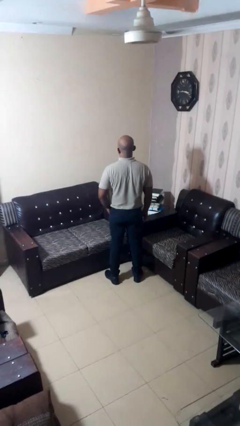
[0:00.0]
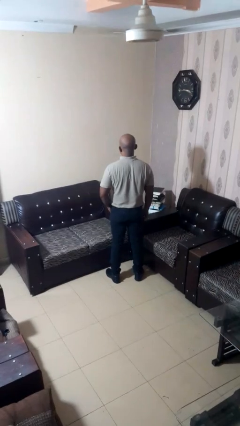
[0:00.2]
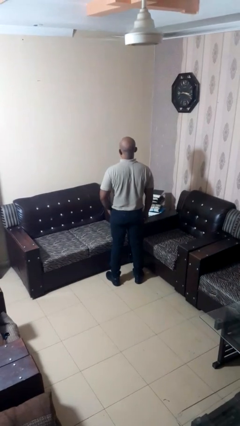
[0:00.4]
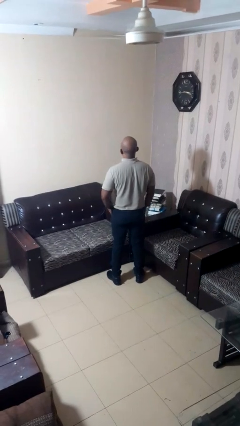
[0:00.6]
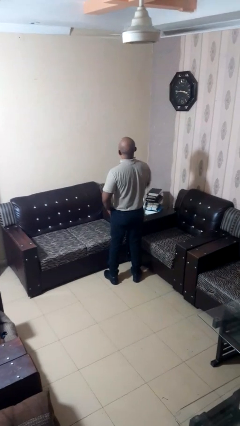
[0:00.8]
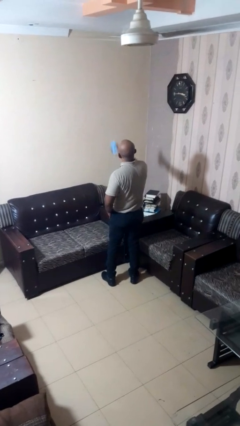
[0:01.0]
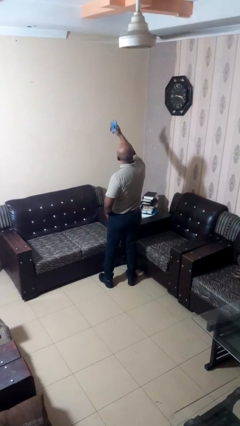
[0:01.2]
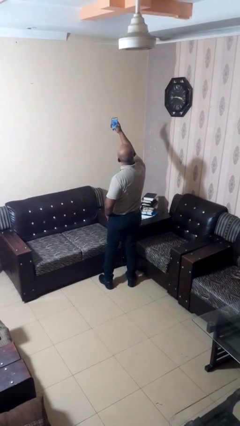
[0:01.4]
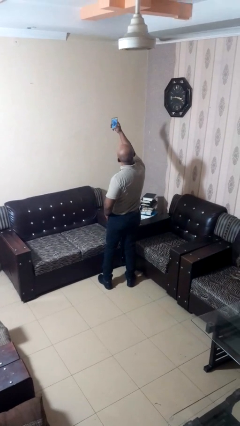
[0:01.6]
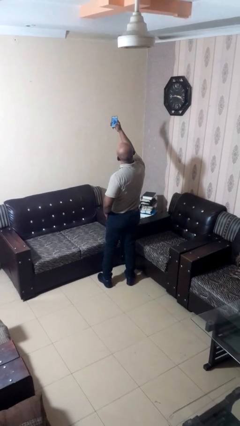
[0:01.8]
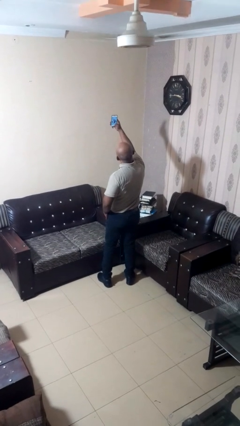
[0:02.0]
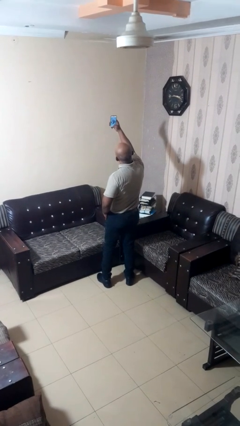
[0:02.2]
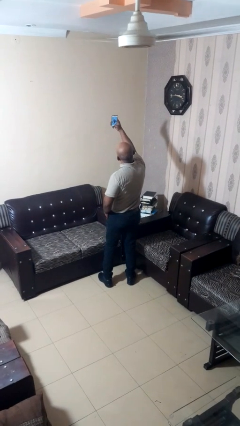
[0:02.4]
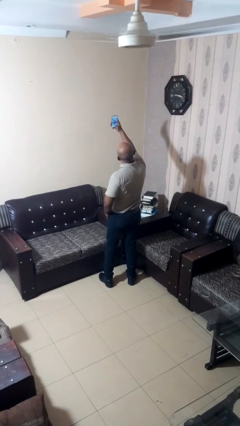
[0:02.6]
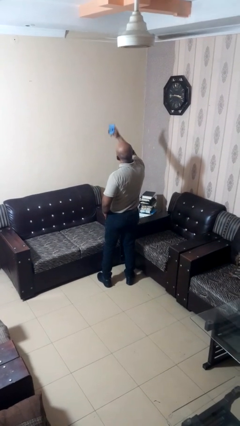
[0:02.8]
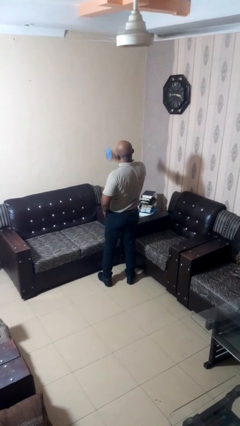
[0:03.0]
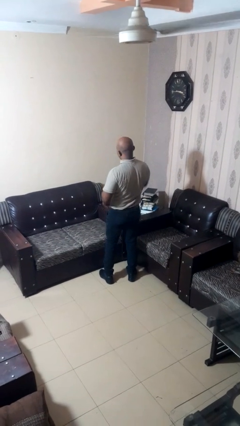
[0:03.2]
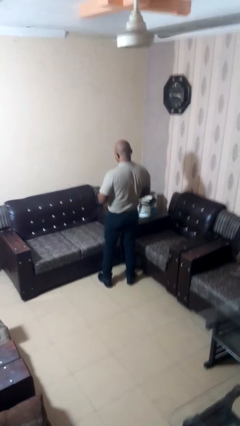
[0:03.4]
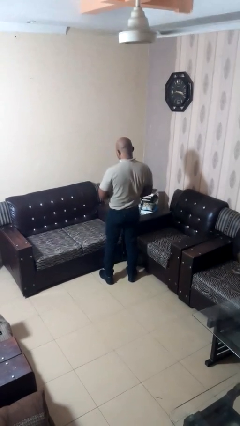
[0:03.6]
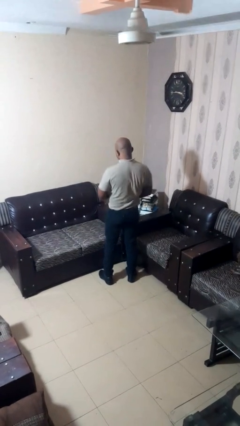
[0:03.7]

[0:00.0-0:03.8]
person takes selfie

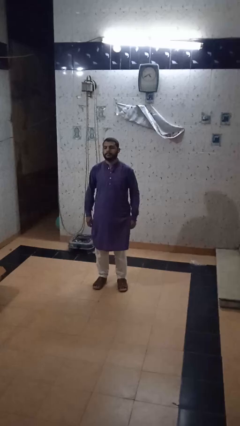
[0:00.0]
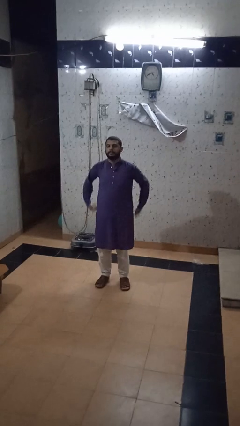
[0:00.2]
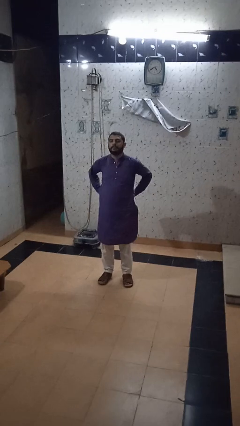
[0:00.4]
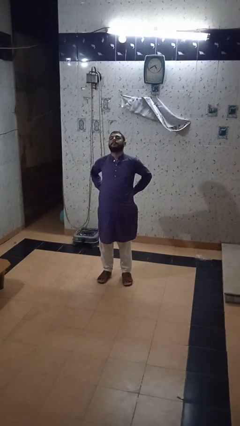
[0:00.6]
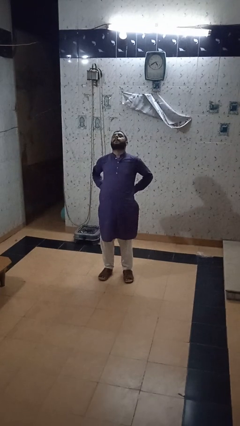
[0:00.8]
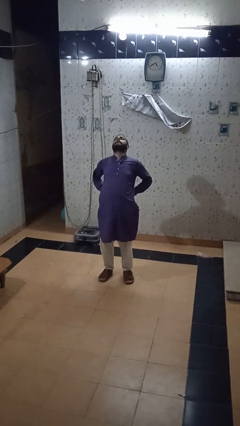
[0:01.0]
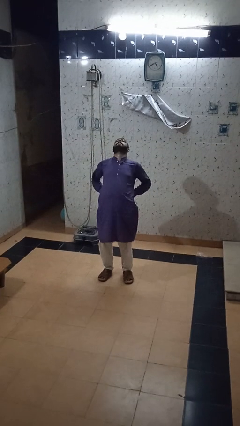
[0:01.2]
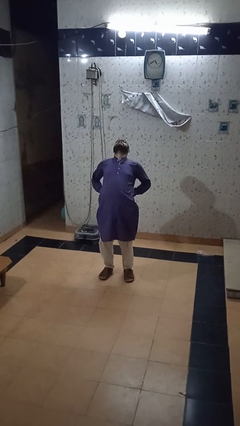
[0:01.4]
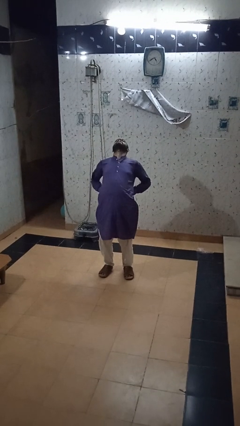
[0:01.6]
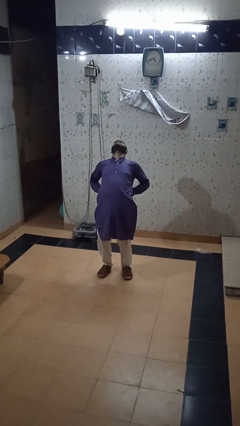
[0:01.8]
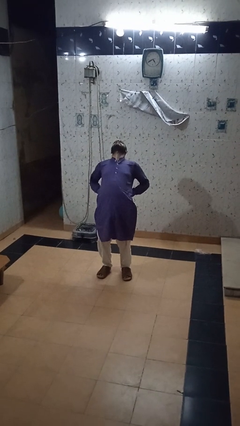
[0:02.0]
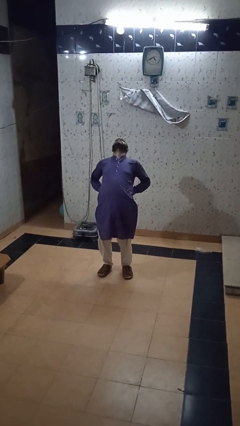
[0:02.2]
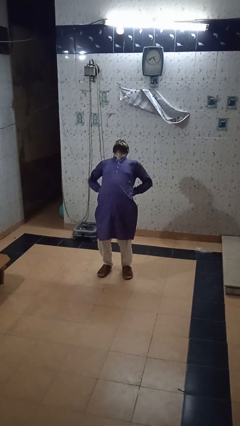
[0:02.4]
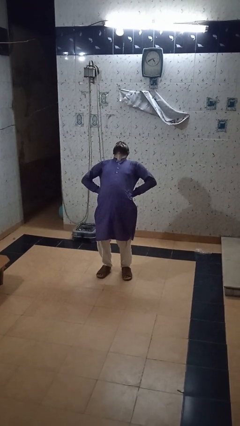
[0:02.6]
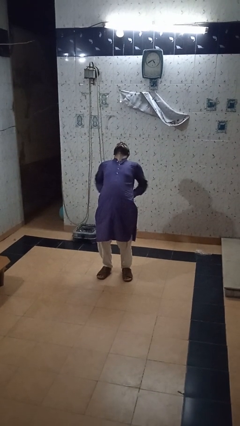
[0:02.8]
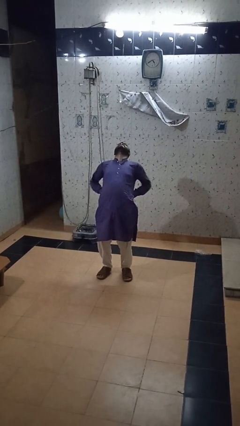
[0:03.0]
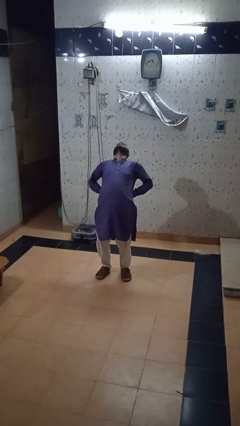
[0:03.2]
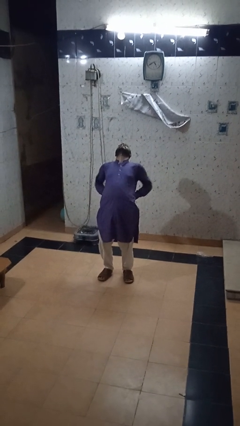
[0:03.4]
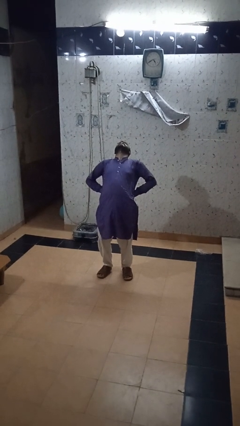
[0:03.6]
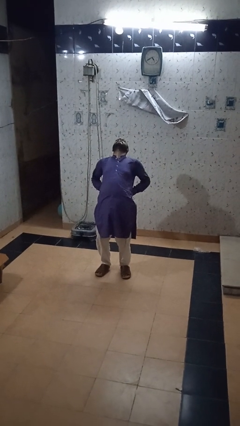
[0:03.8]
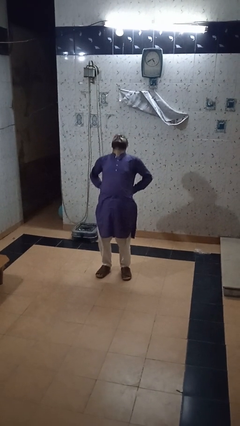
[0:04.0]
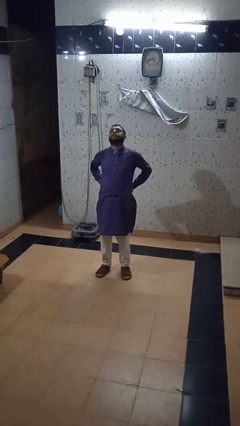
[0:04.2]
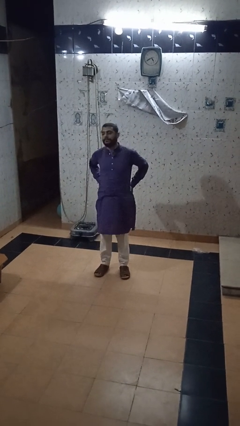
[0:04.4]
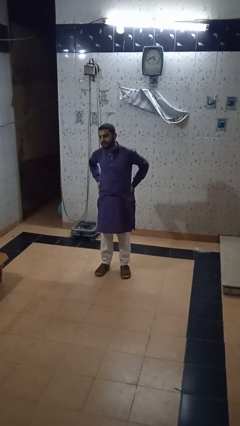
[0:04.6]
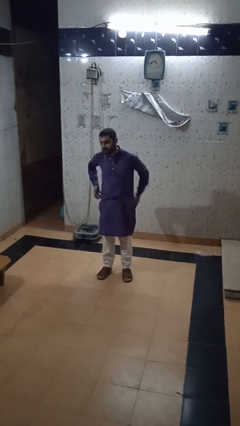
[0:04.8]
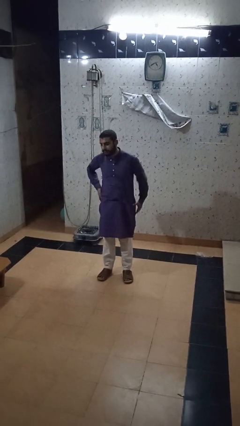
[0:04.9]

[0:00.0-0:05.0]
person stretches back

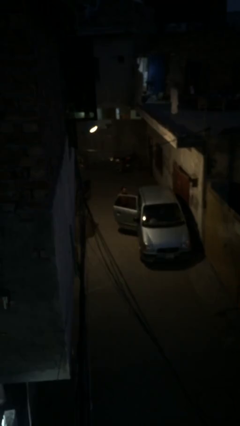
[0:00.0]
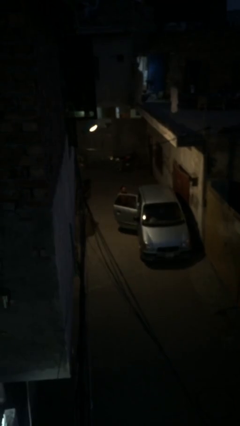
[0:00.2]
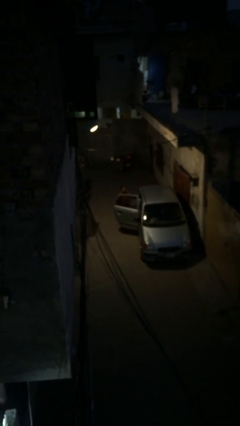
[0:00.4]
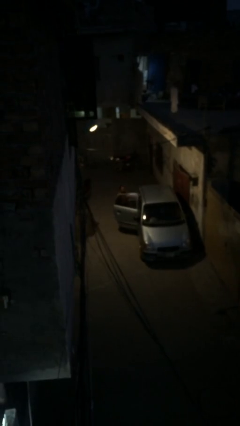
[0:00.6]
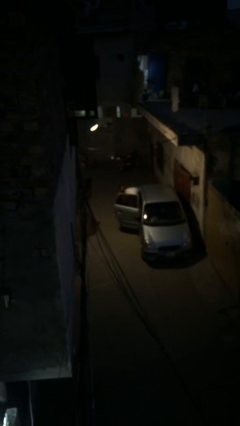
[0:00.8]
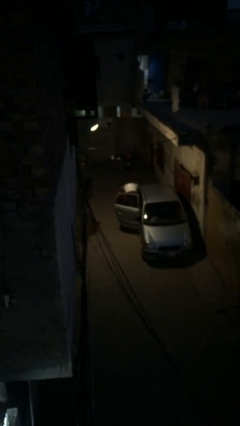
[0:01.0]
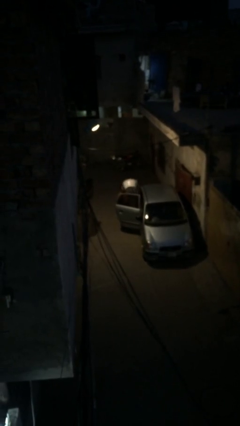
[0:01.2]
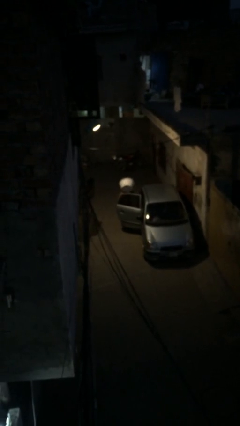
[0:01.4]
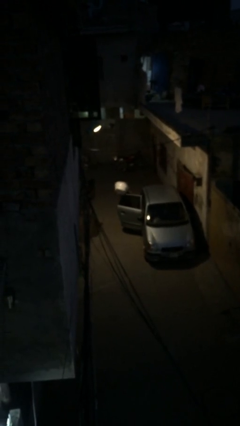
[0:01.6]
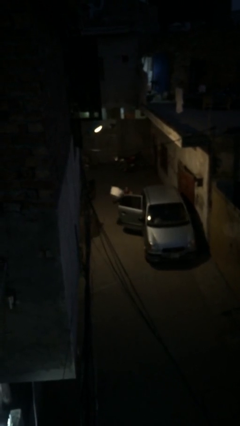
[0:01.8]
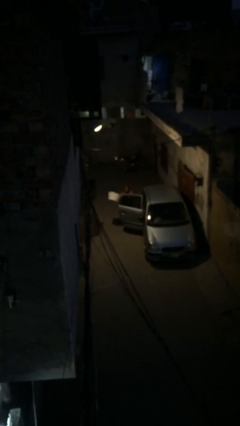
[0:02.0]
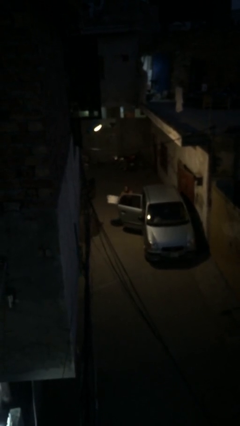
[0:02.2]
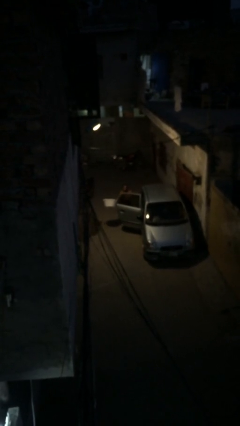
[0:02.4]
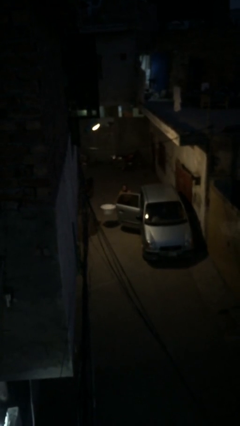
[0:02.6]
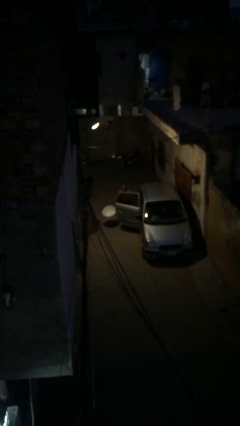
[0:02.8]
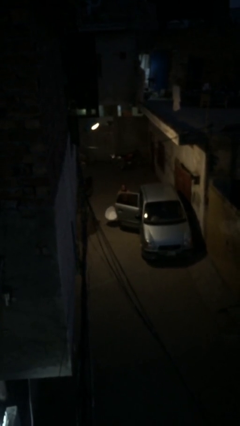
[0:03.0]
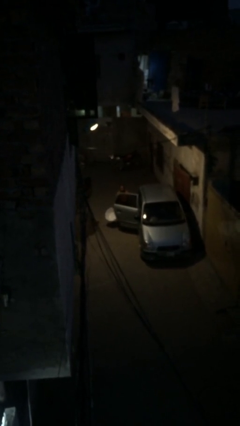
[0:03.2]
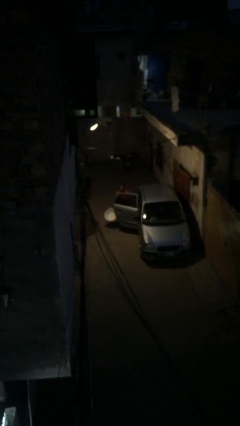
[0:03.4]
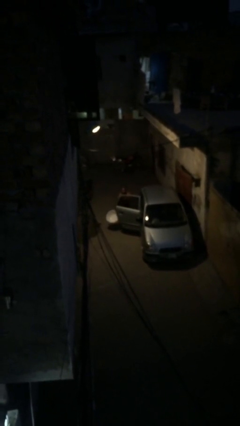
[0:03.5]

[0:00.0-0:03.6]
person unloads car

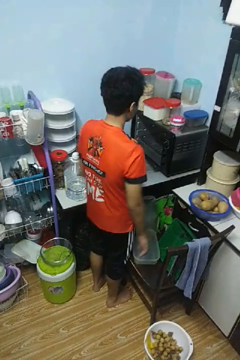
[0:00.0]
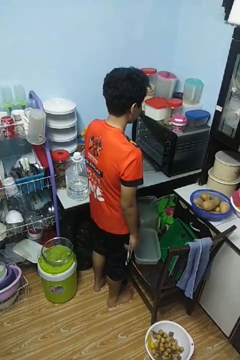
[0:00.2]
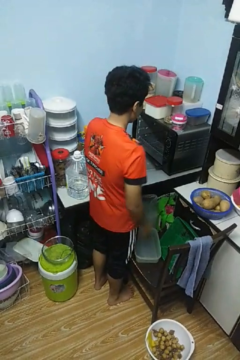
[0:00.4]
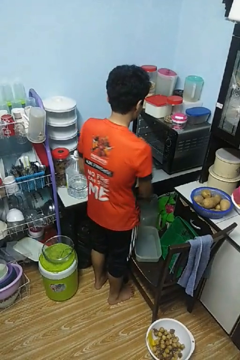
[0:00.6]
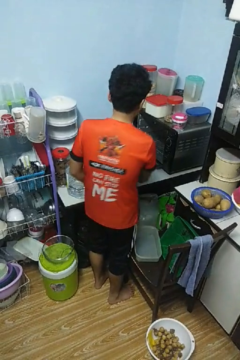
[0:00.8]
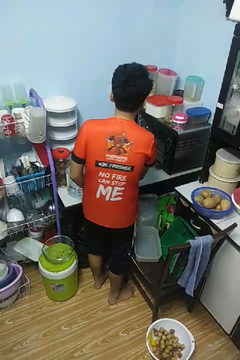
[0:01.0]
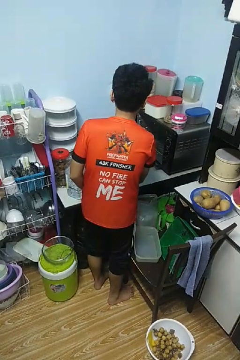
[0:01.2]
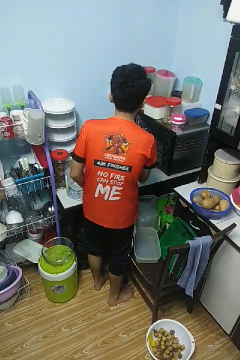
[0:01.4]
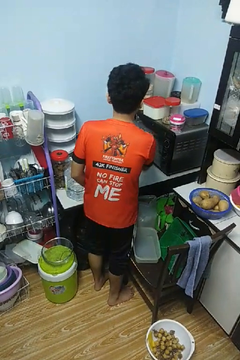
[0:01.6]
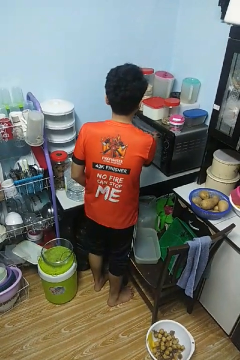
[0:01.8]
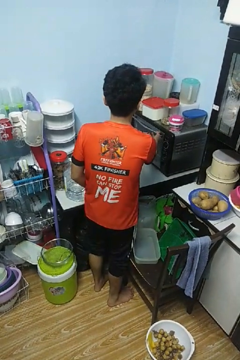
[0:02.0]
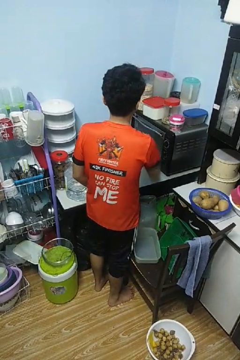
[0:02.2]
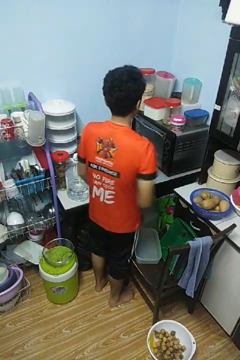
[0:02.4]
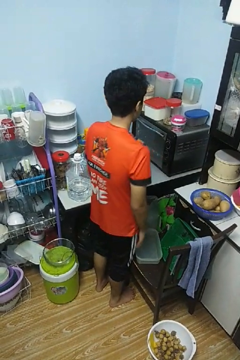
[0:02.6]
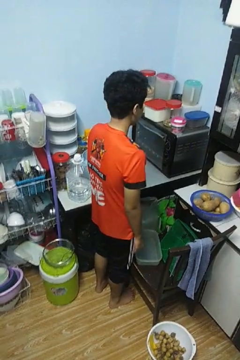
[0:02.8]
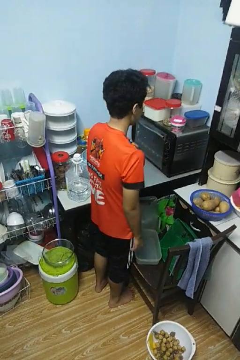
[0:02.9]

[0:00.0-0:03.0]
person closes oven door

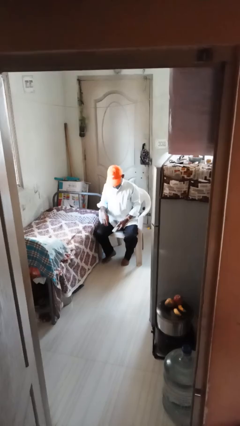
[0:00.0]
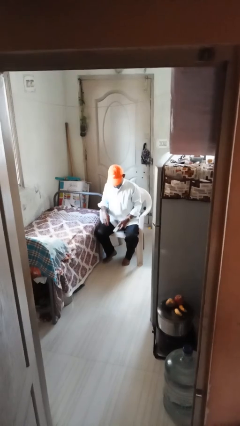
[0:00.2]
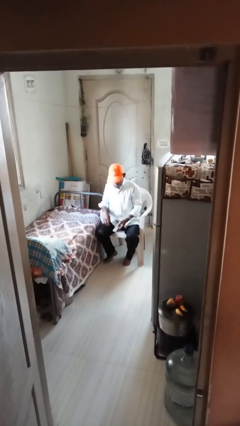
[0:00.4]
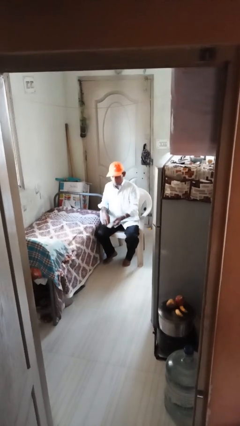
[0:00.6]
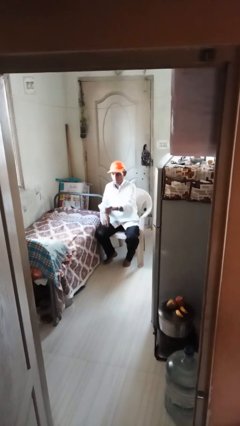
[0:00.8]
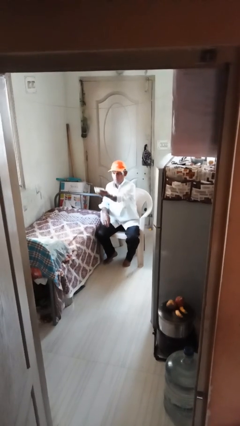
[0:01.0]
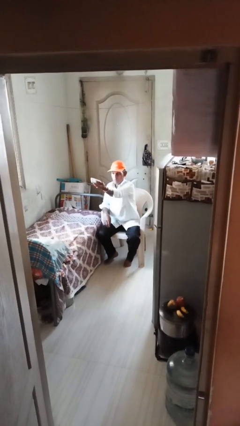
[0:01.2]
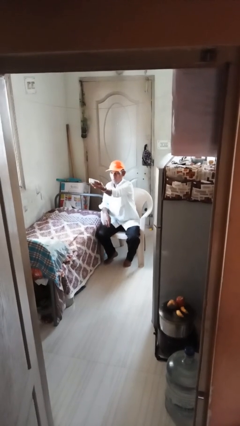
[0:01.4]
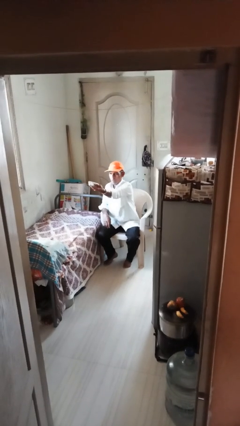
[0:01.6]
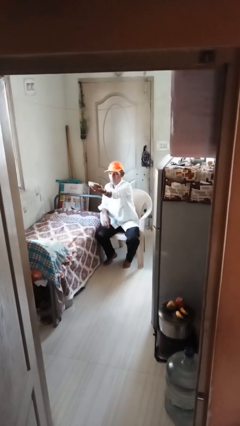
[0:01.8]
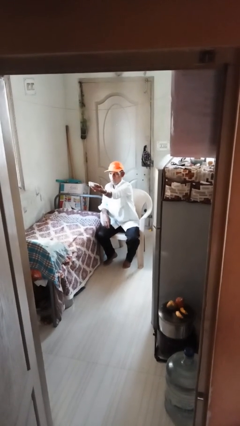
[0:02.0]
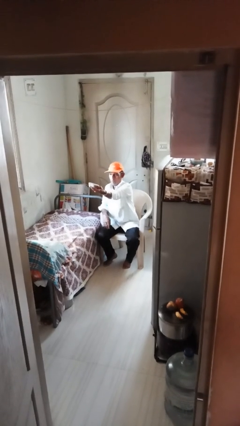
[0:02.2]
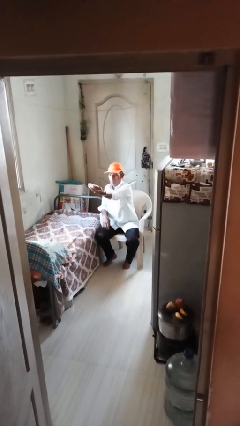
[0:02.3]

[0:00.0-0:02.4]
person uses television remote

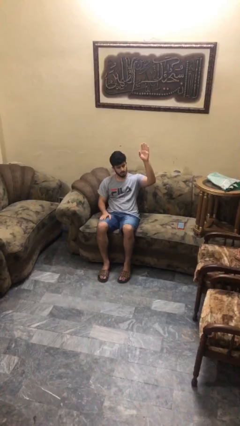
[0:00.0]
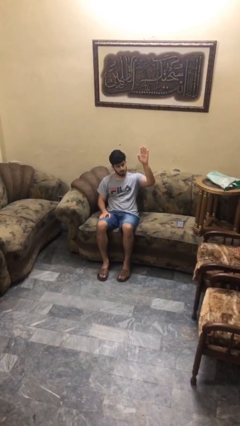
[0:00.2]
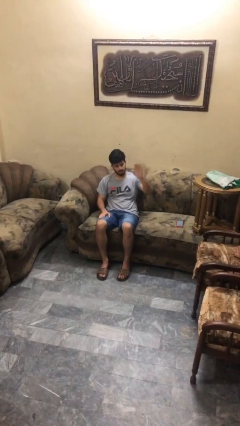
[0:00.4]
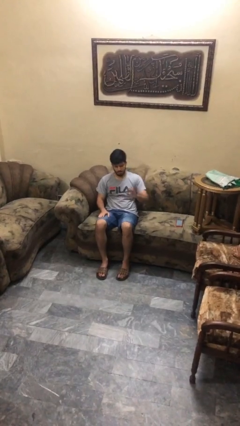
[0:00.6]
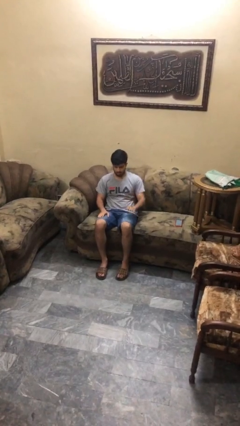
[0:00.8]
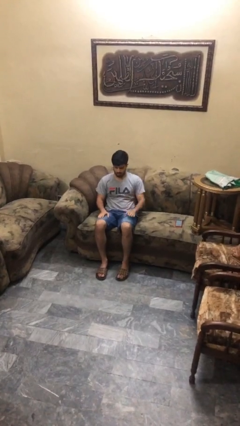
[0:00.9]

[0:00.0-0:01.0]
person gestures lower hand
